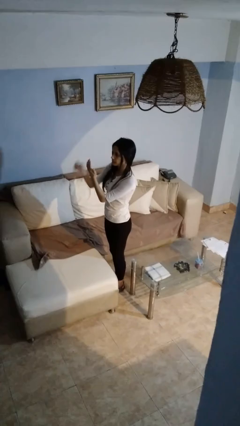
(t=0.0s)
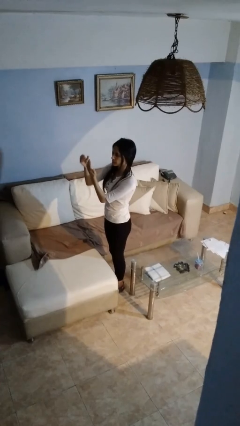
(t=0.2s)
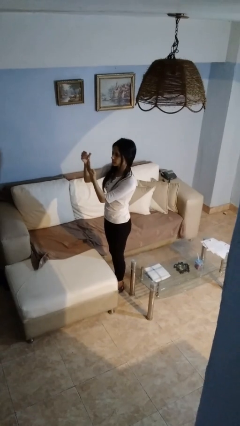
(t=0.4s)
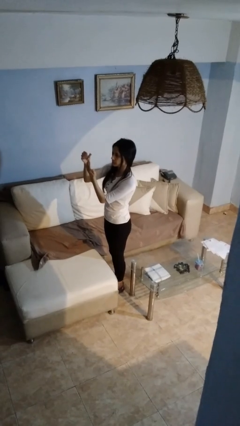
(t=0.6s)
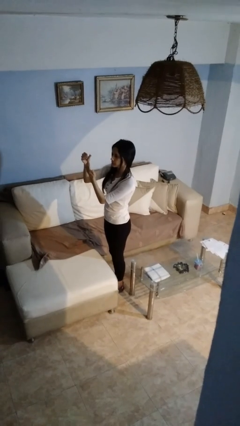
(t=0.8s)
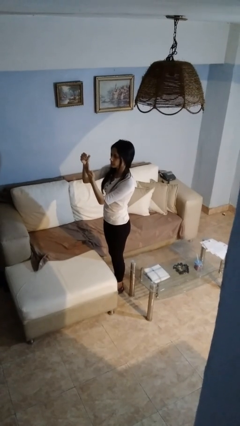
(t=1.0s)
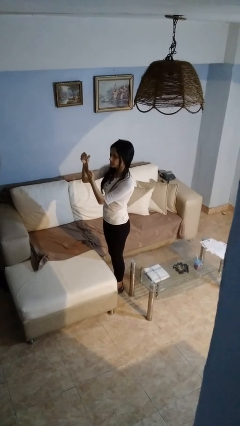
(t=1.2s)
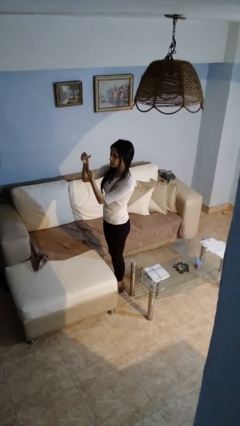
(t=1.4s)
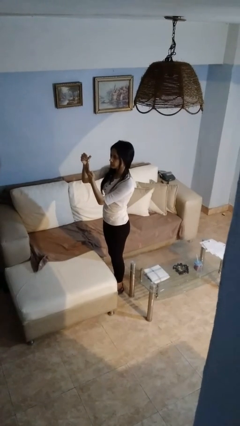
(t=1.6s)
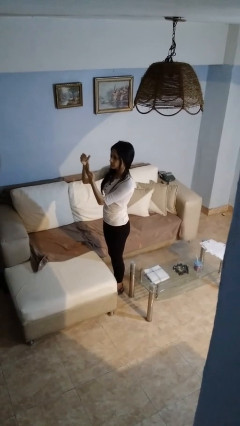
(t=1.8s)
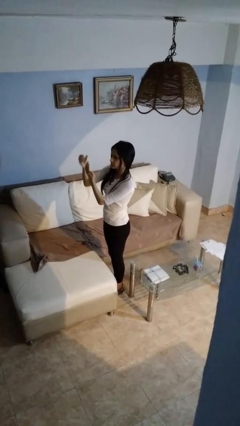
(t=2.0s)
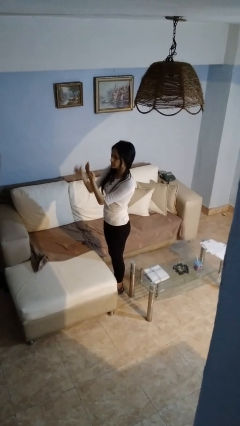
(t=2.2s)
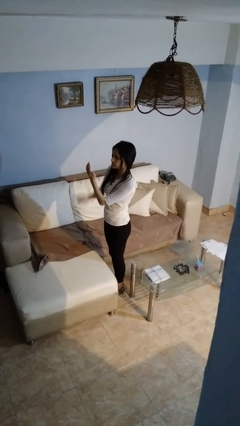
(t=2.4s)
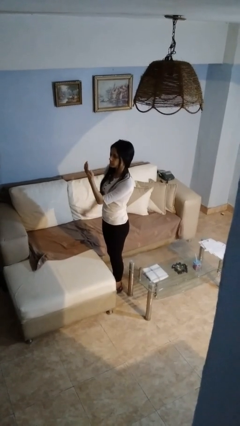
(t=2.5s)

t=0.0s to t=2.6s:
person clips fingernails

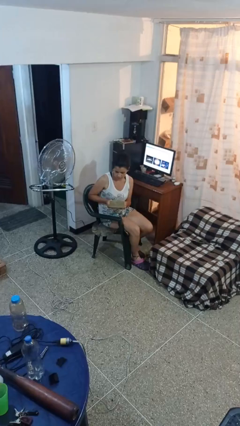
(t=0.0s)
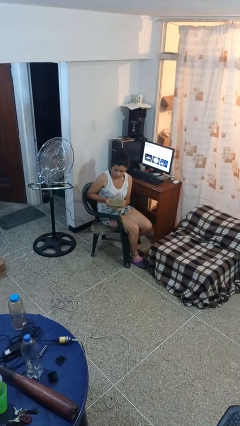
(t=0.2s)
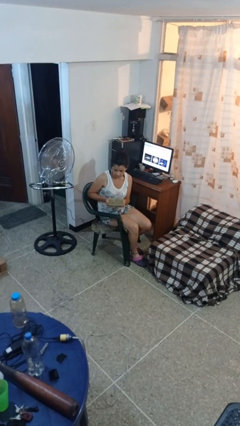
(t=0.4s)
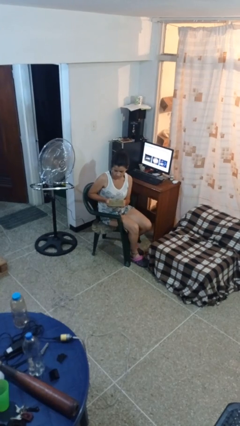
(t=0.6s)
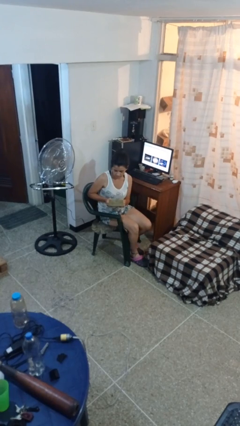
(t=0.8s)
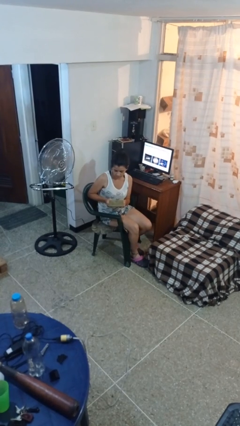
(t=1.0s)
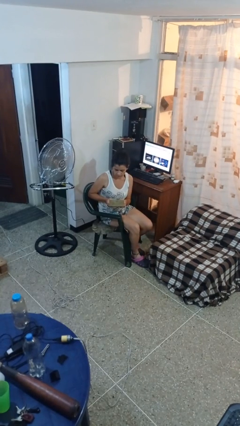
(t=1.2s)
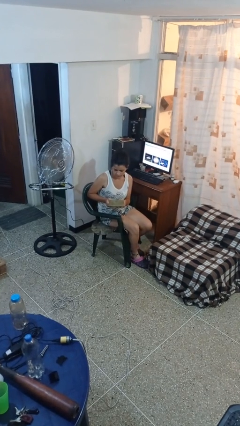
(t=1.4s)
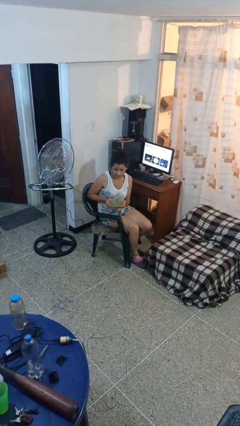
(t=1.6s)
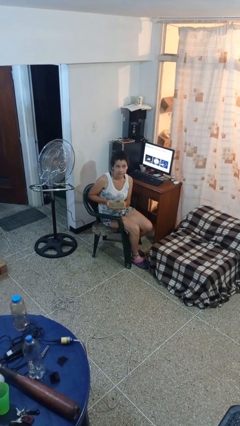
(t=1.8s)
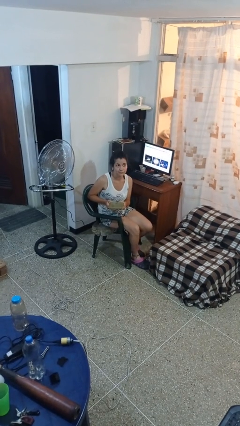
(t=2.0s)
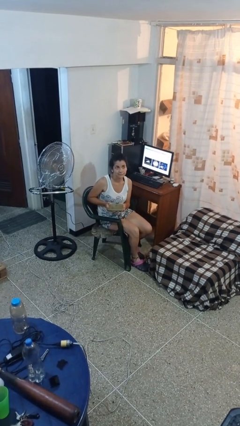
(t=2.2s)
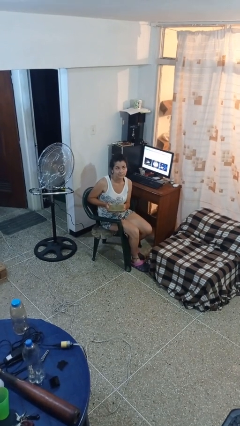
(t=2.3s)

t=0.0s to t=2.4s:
person interacts with handheld game

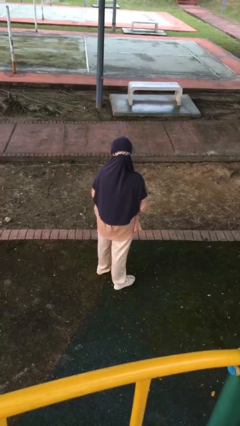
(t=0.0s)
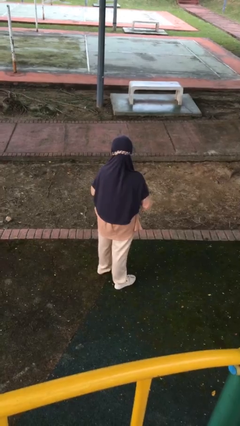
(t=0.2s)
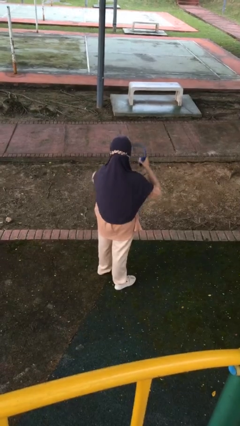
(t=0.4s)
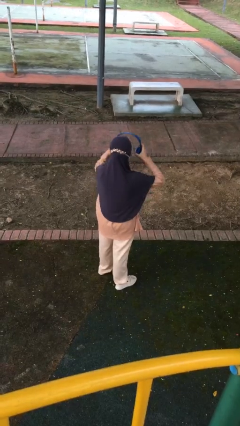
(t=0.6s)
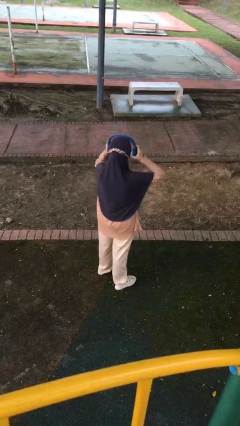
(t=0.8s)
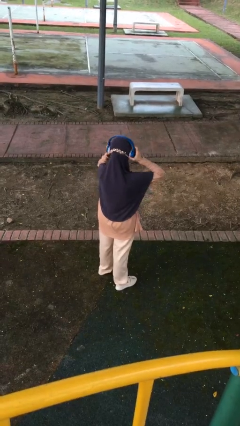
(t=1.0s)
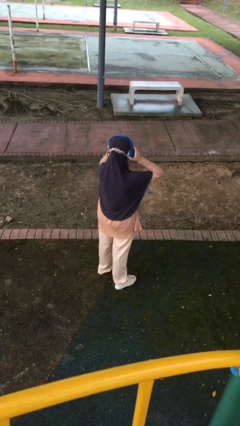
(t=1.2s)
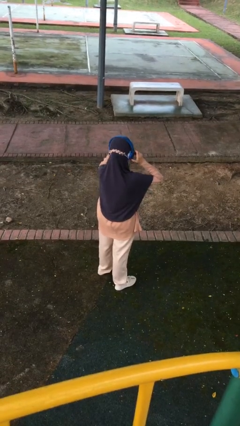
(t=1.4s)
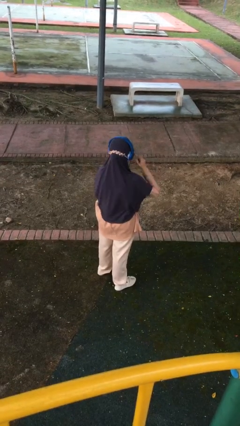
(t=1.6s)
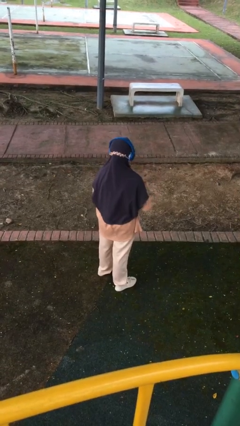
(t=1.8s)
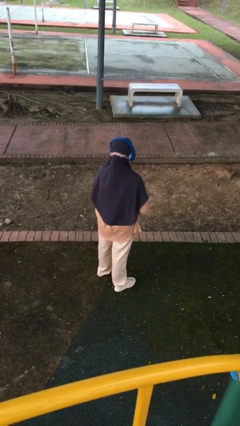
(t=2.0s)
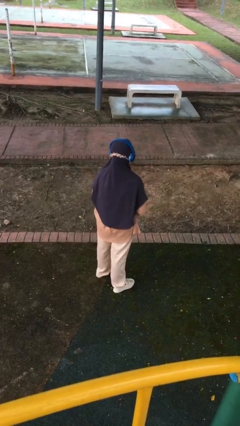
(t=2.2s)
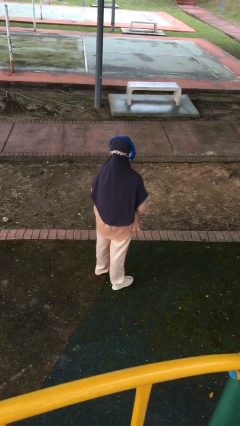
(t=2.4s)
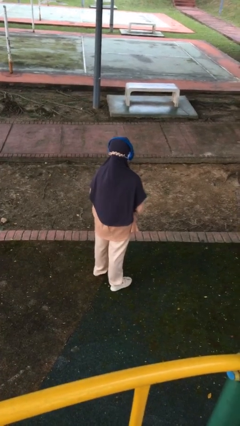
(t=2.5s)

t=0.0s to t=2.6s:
person puts on headphones

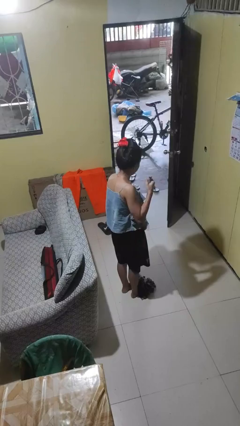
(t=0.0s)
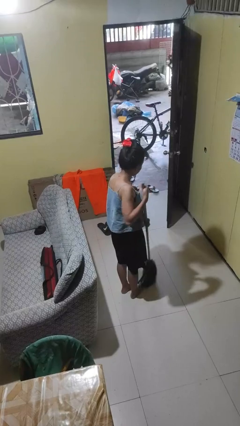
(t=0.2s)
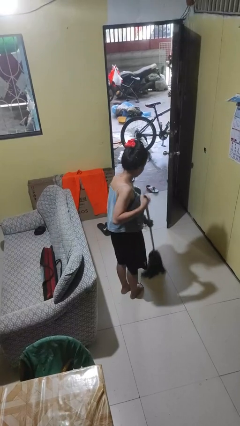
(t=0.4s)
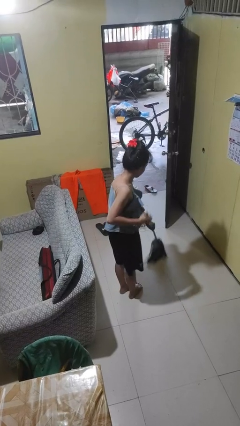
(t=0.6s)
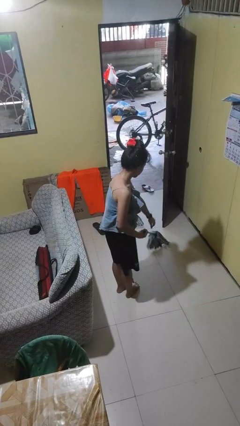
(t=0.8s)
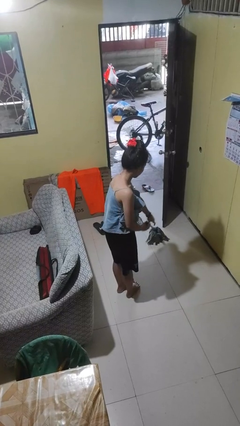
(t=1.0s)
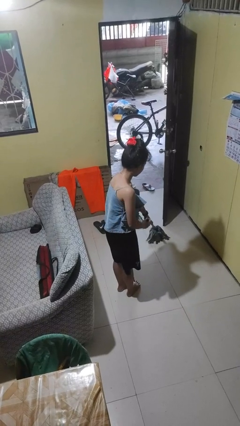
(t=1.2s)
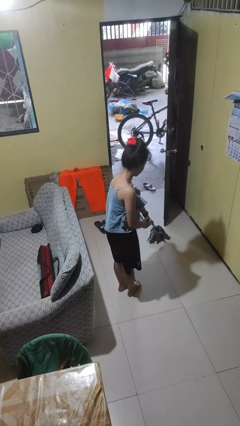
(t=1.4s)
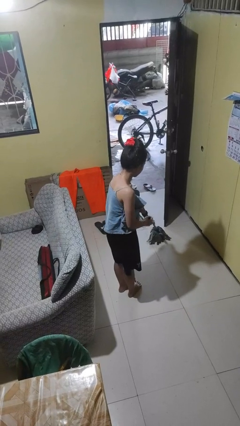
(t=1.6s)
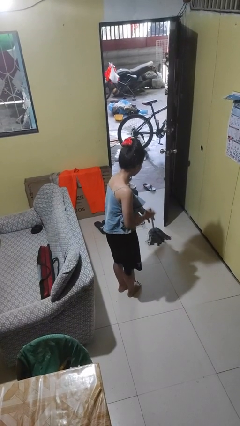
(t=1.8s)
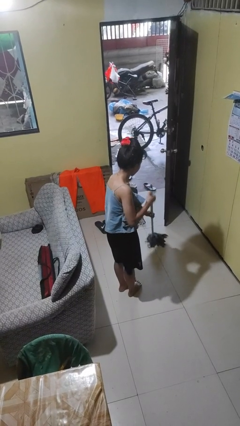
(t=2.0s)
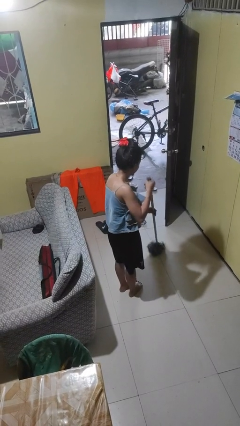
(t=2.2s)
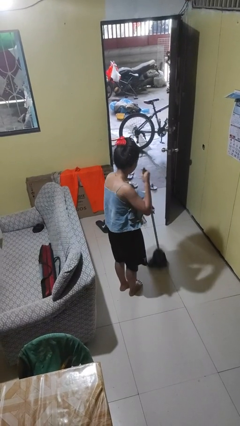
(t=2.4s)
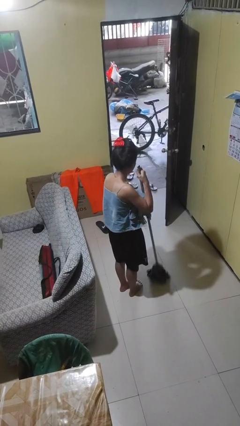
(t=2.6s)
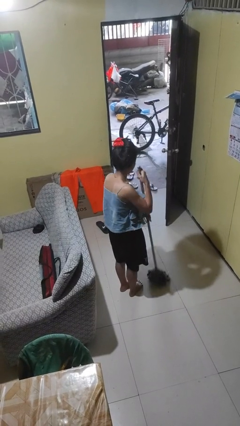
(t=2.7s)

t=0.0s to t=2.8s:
person mops

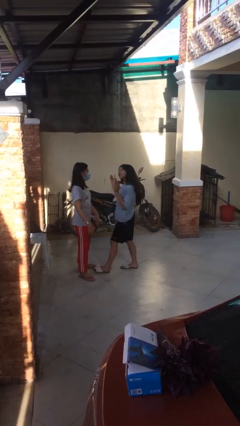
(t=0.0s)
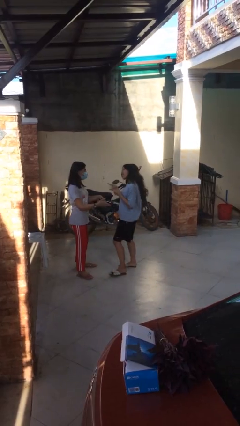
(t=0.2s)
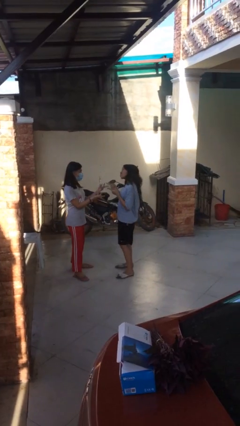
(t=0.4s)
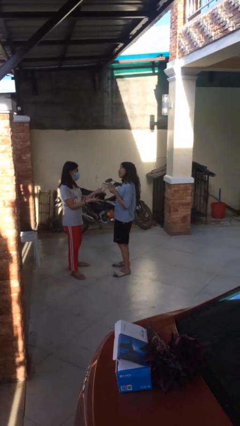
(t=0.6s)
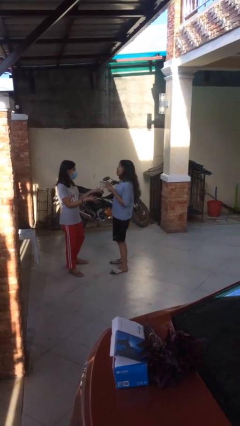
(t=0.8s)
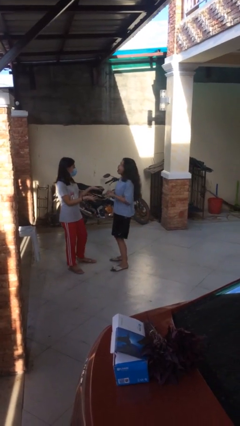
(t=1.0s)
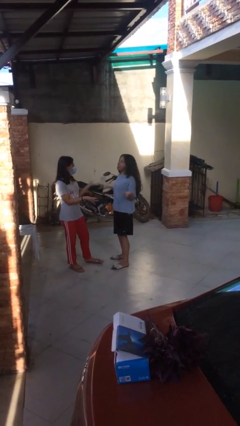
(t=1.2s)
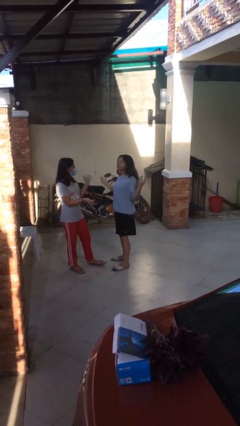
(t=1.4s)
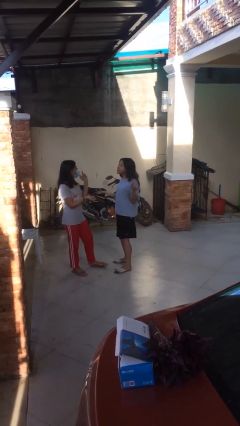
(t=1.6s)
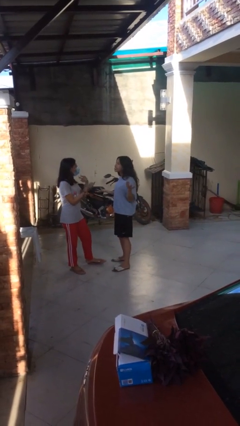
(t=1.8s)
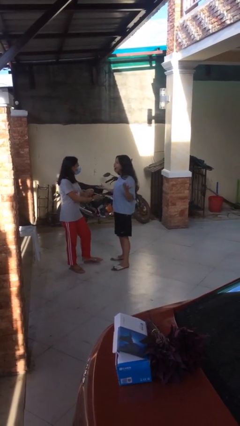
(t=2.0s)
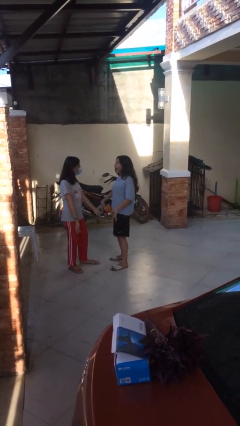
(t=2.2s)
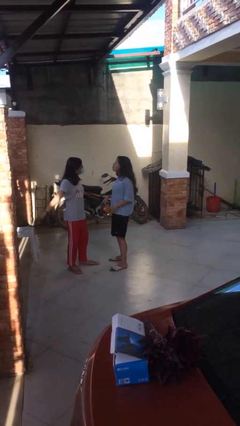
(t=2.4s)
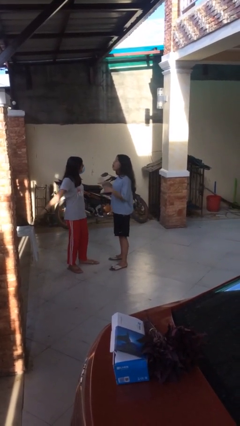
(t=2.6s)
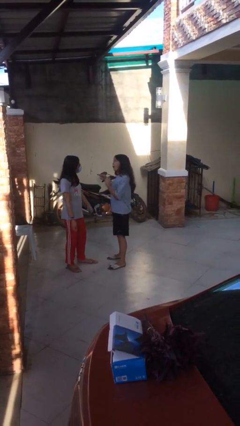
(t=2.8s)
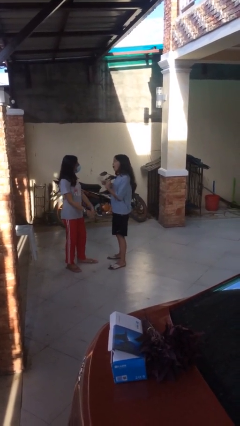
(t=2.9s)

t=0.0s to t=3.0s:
person talks to person

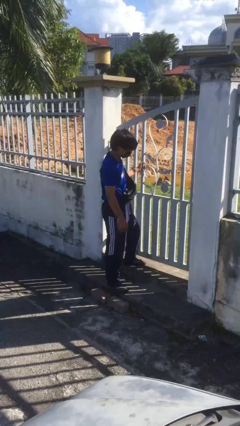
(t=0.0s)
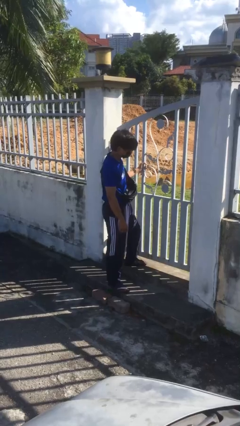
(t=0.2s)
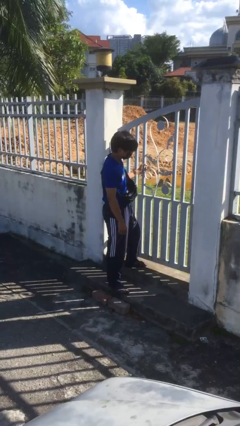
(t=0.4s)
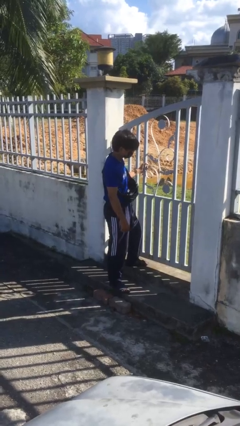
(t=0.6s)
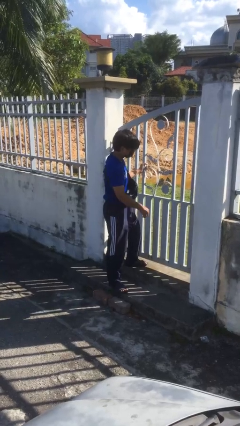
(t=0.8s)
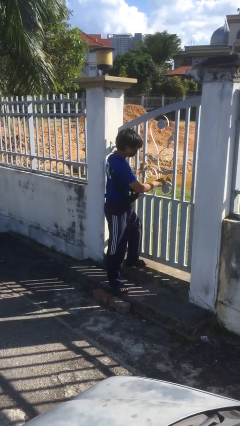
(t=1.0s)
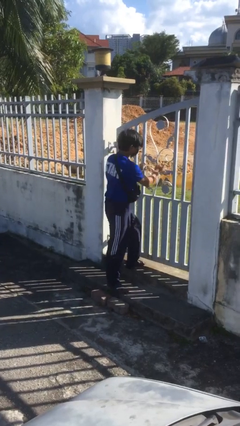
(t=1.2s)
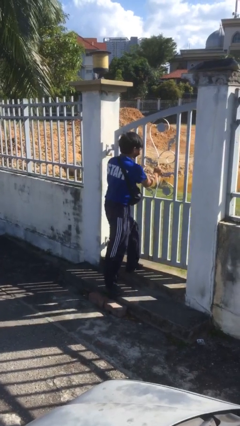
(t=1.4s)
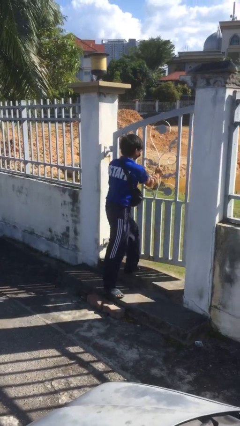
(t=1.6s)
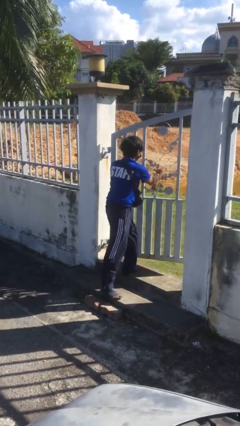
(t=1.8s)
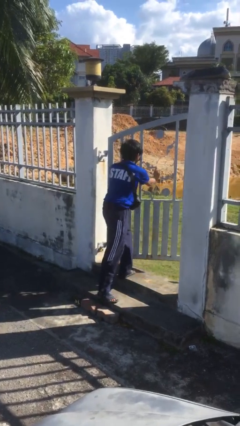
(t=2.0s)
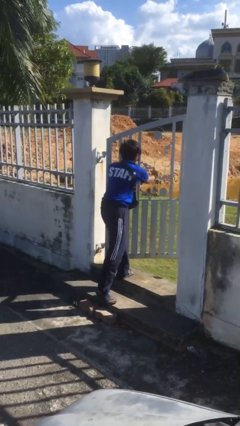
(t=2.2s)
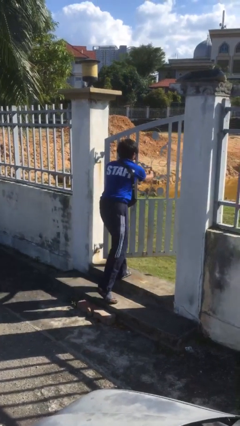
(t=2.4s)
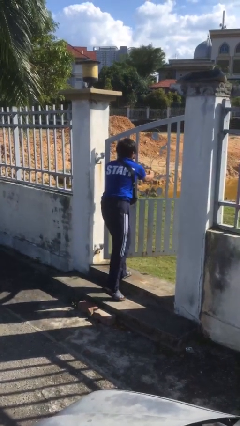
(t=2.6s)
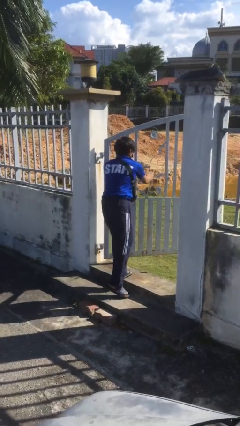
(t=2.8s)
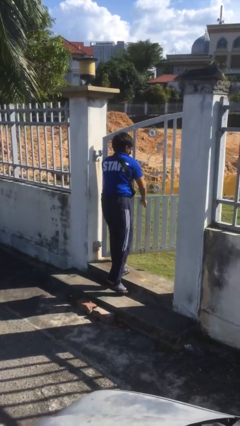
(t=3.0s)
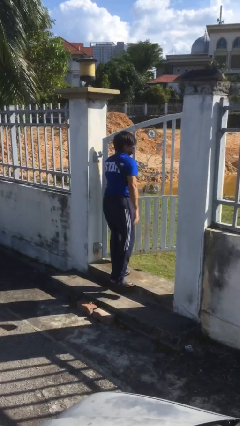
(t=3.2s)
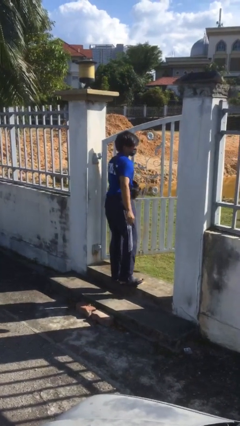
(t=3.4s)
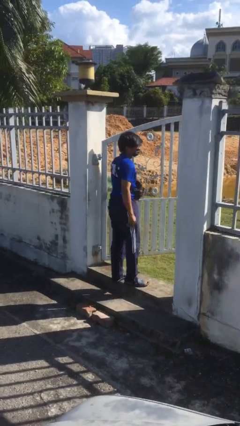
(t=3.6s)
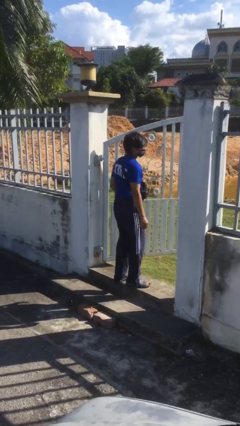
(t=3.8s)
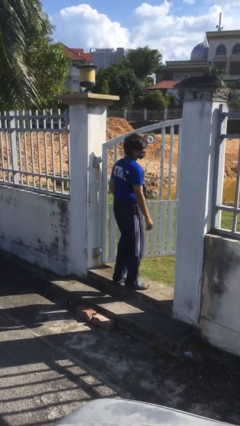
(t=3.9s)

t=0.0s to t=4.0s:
person opens facility door
